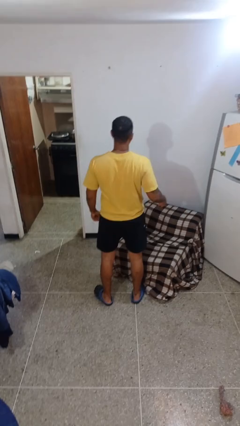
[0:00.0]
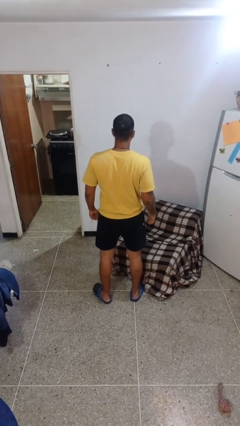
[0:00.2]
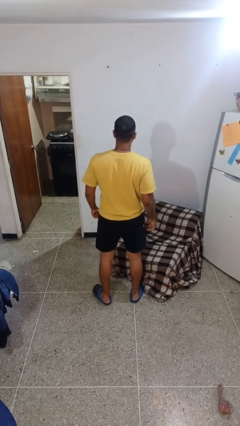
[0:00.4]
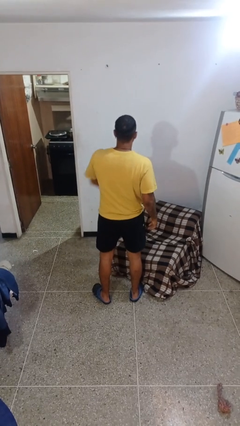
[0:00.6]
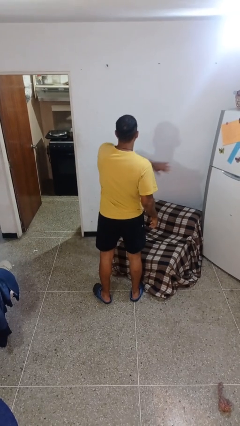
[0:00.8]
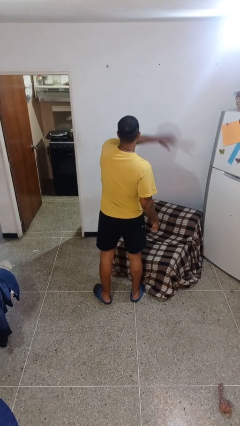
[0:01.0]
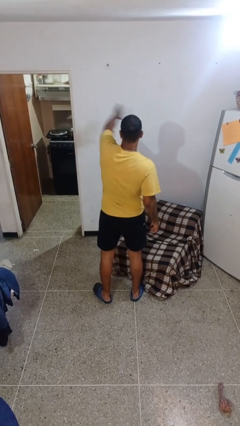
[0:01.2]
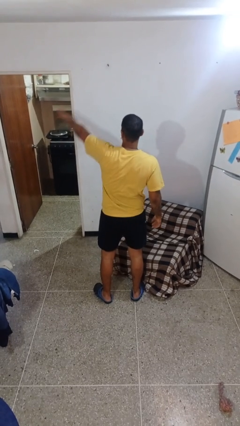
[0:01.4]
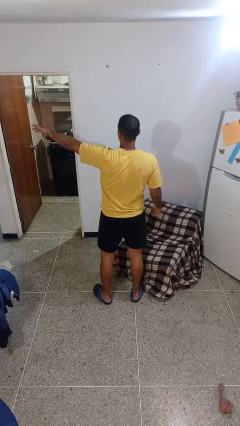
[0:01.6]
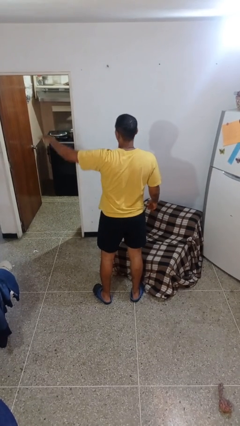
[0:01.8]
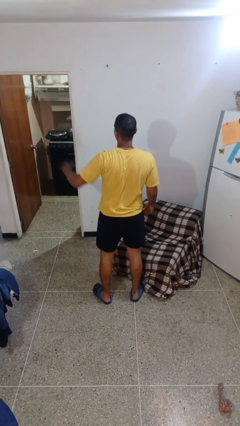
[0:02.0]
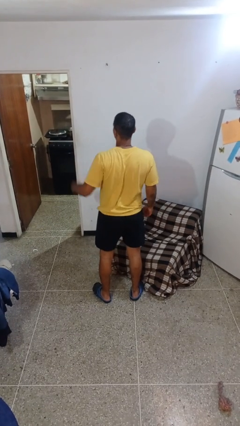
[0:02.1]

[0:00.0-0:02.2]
person gestures swipe left

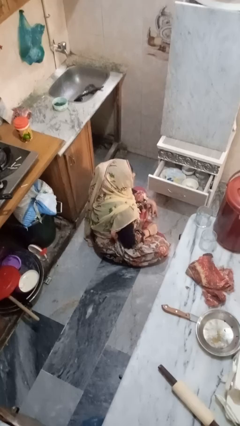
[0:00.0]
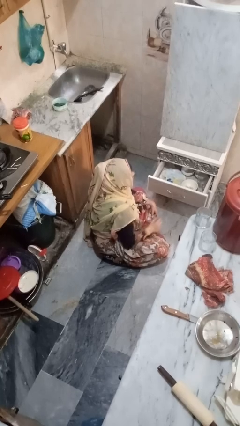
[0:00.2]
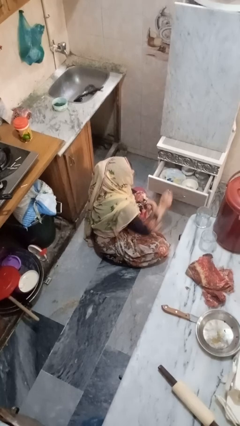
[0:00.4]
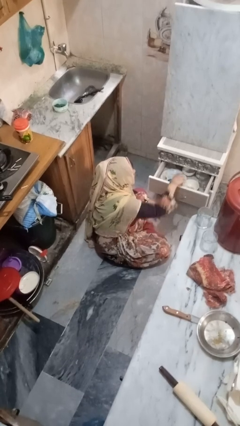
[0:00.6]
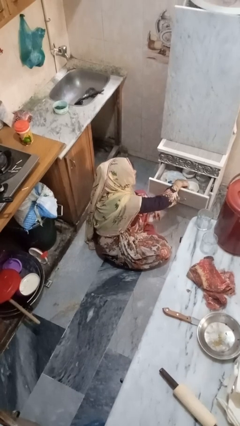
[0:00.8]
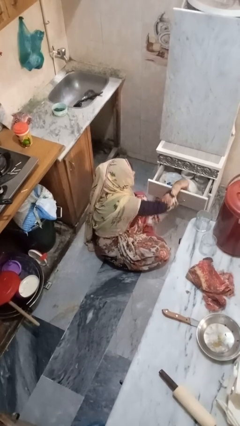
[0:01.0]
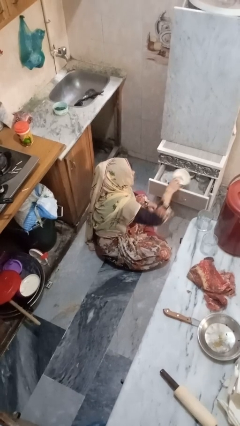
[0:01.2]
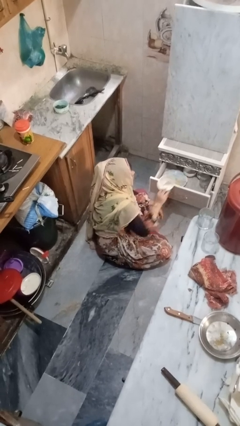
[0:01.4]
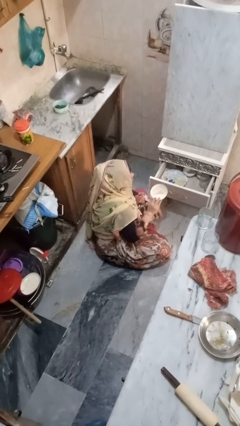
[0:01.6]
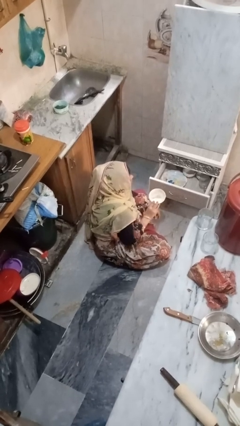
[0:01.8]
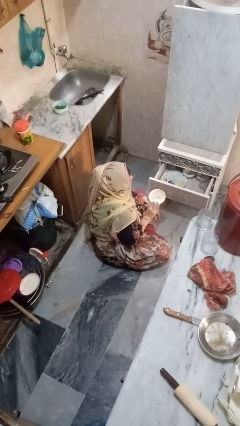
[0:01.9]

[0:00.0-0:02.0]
person takes object from kitchen drawer

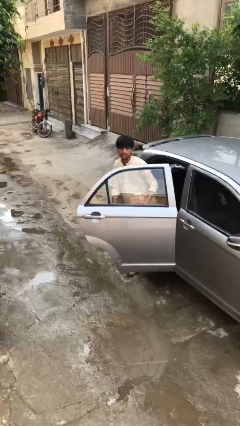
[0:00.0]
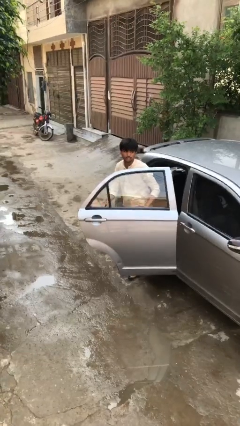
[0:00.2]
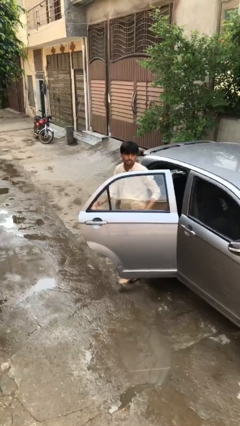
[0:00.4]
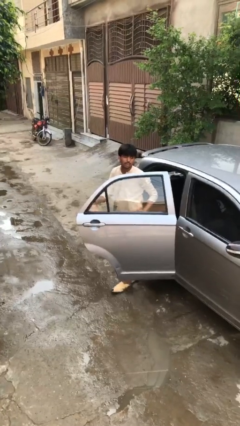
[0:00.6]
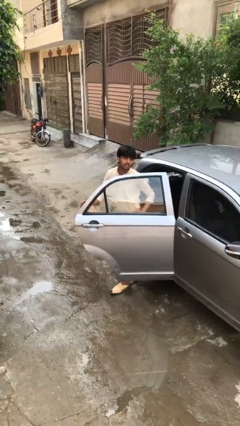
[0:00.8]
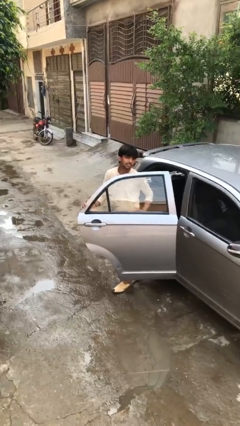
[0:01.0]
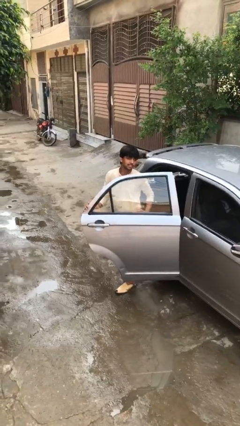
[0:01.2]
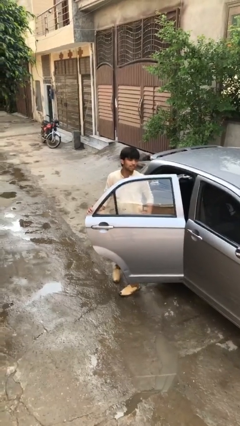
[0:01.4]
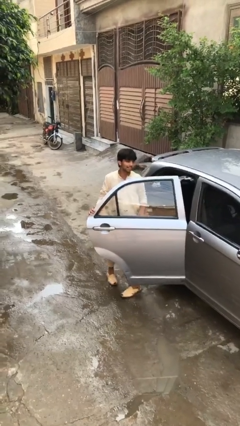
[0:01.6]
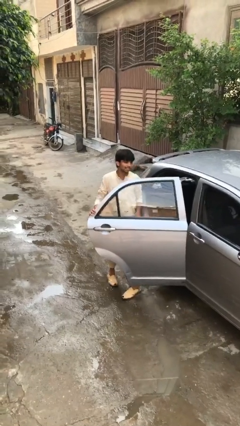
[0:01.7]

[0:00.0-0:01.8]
person exits car

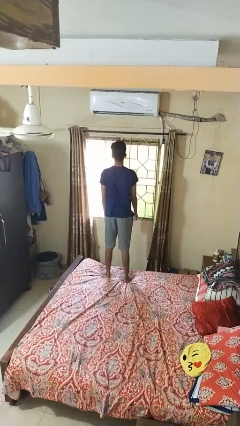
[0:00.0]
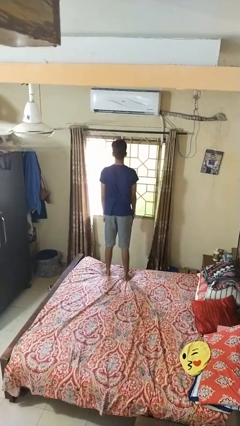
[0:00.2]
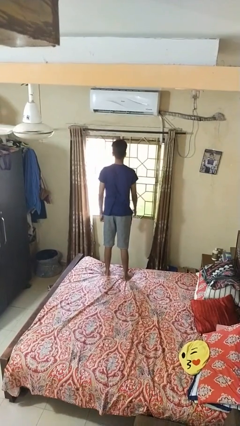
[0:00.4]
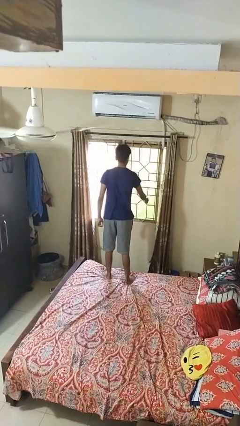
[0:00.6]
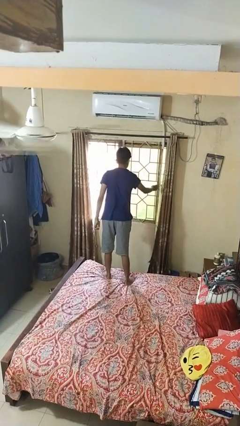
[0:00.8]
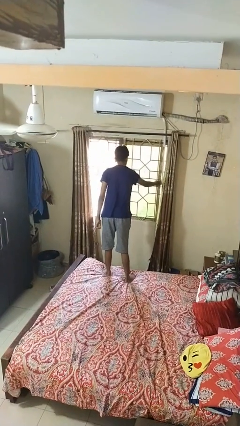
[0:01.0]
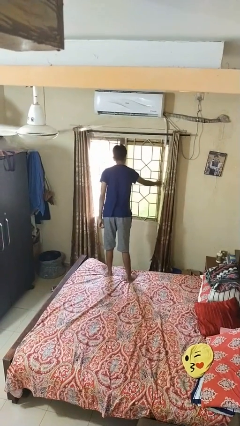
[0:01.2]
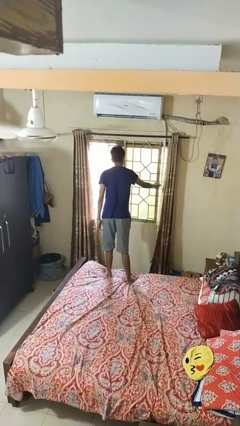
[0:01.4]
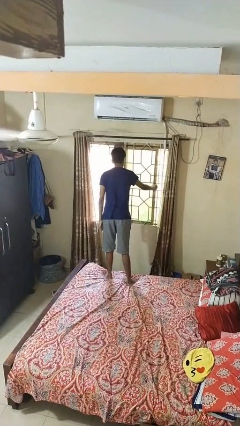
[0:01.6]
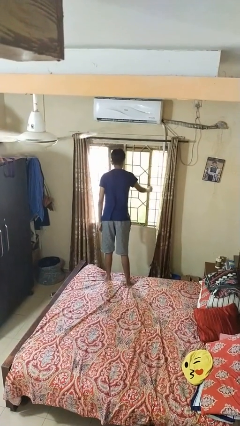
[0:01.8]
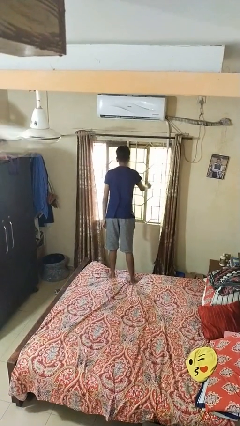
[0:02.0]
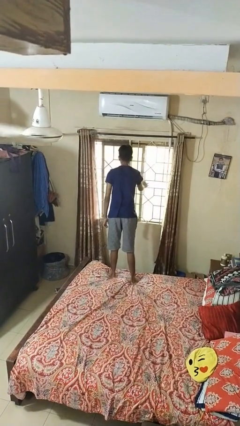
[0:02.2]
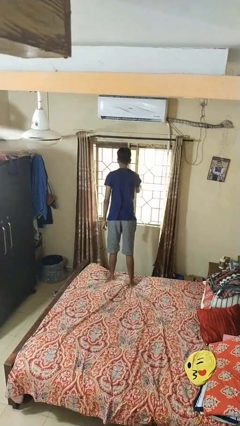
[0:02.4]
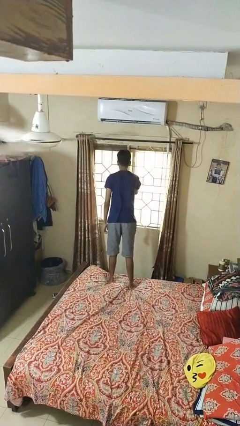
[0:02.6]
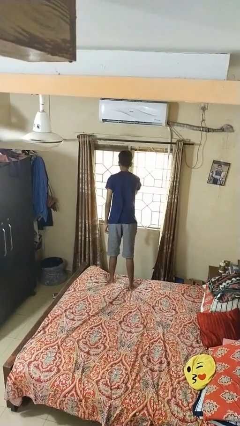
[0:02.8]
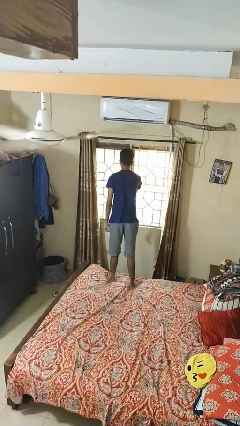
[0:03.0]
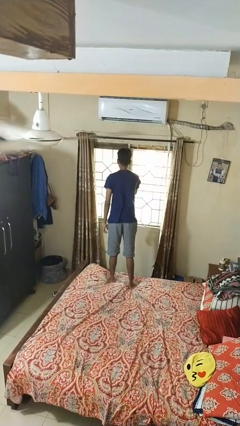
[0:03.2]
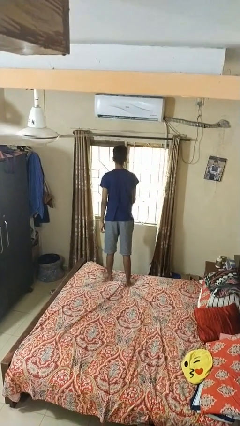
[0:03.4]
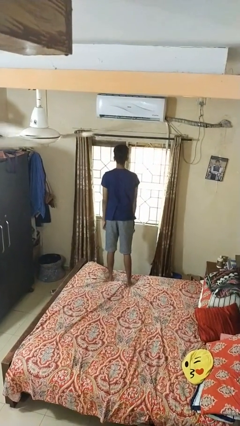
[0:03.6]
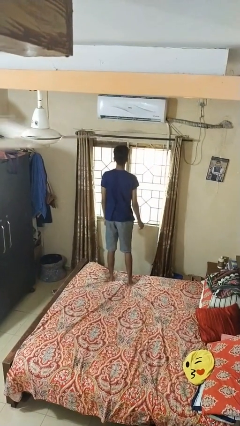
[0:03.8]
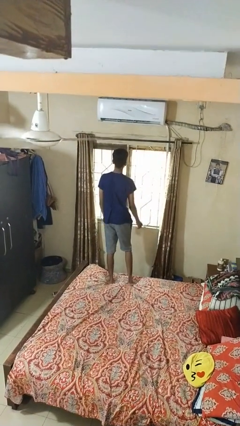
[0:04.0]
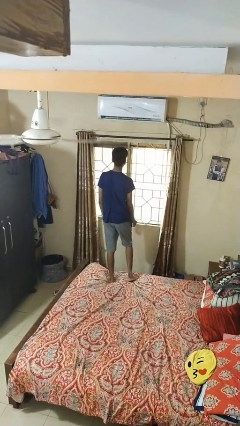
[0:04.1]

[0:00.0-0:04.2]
person closes home window

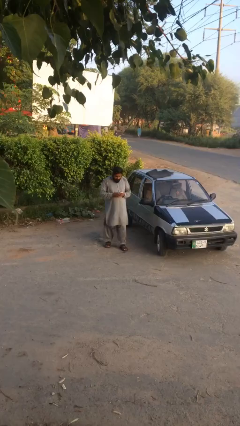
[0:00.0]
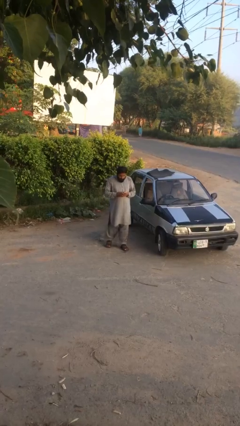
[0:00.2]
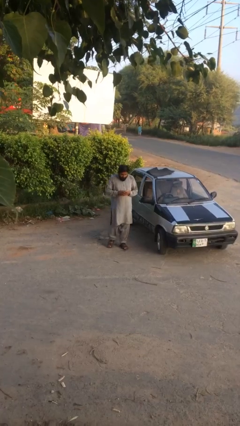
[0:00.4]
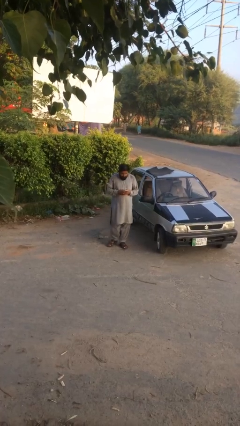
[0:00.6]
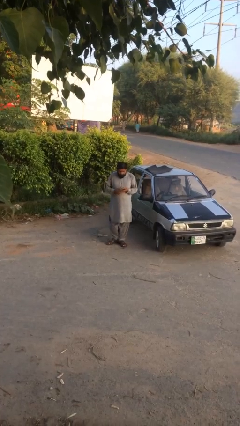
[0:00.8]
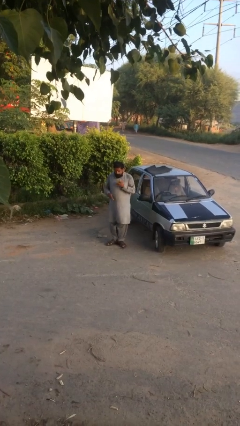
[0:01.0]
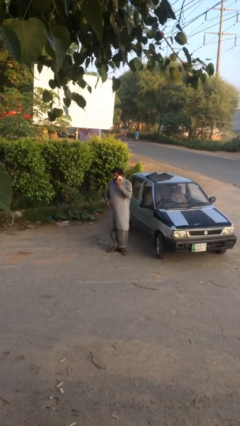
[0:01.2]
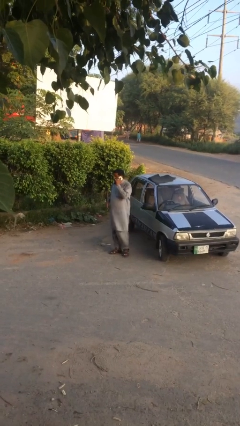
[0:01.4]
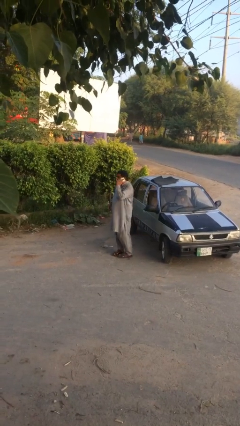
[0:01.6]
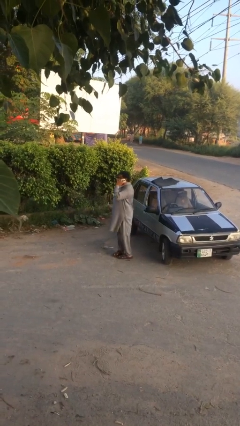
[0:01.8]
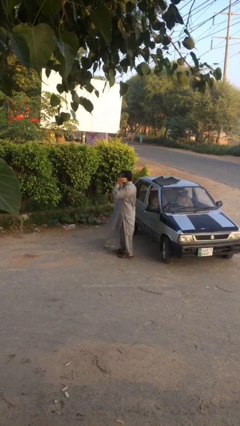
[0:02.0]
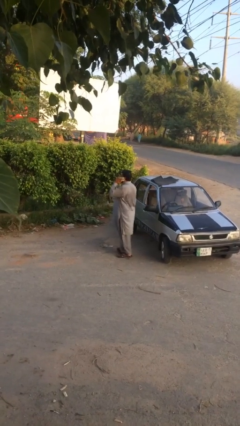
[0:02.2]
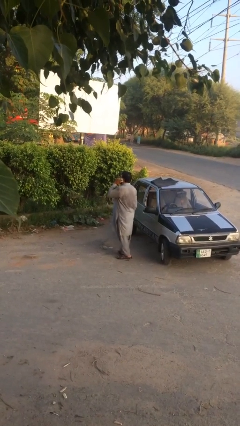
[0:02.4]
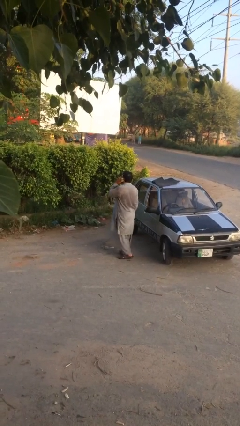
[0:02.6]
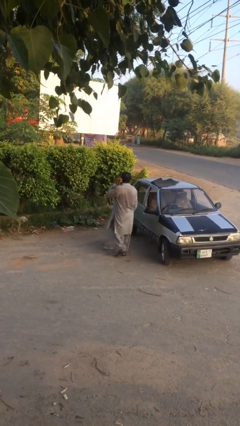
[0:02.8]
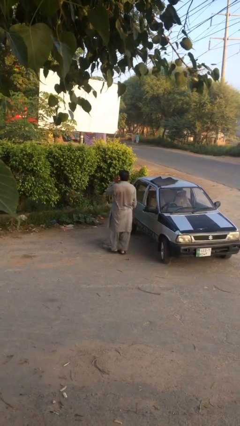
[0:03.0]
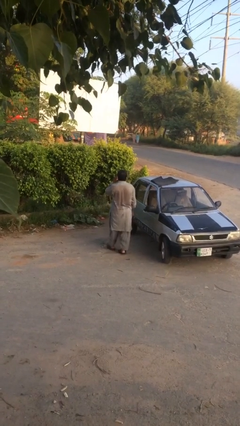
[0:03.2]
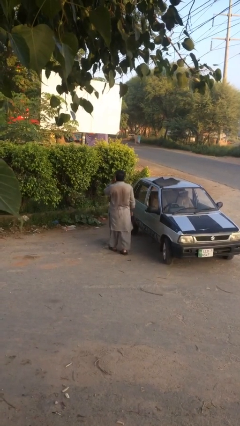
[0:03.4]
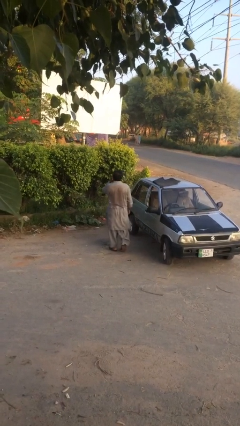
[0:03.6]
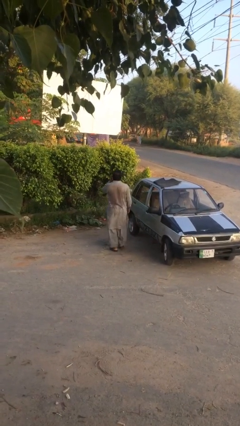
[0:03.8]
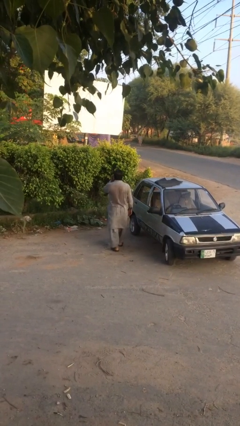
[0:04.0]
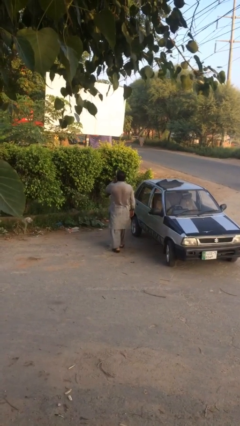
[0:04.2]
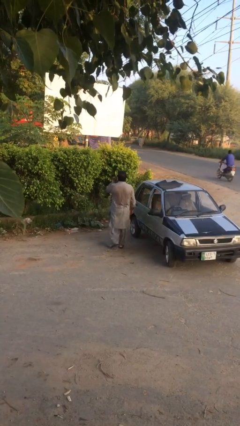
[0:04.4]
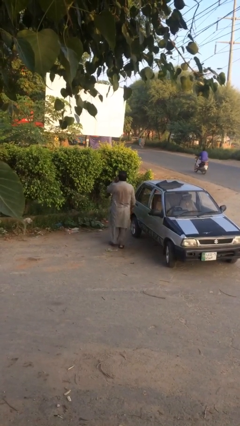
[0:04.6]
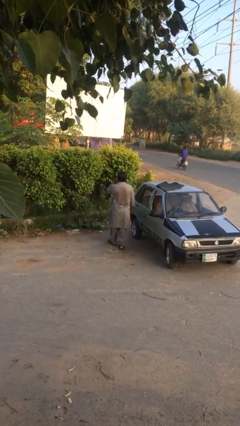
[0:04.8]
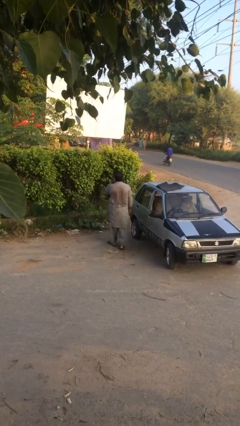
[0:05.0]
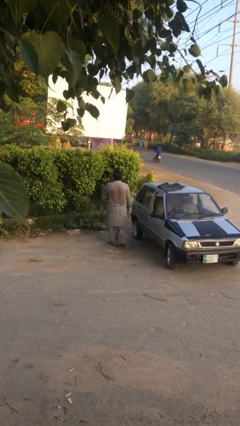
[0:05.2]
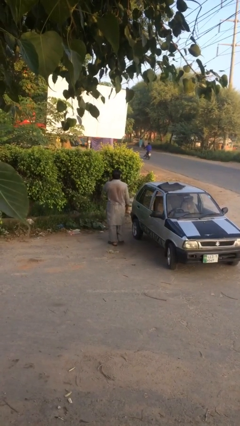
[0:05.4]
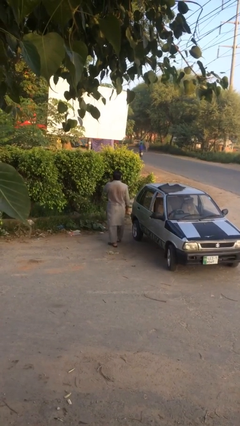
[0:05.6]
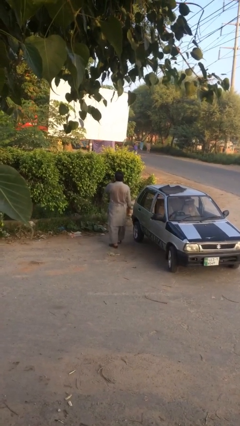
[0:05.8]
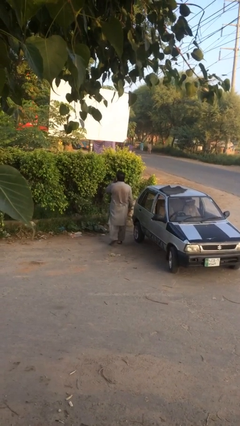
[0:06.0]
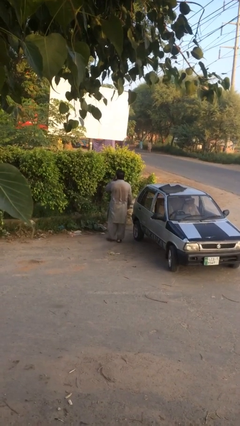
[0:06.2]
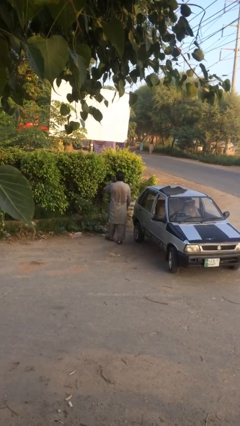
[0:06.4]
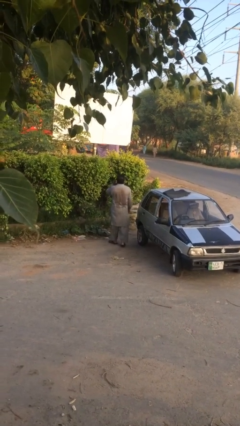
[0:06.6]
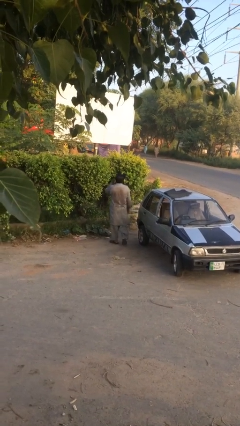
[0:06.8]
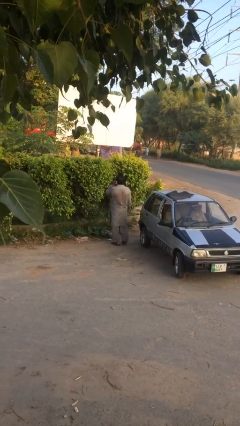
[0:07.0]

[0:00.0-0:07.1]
person talks on phone
